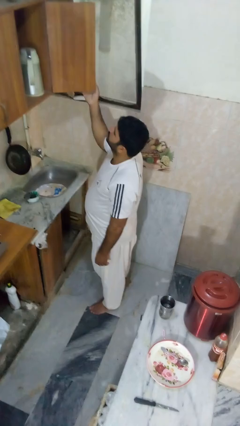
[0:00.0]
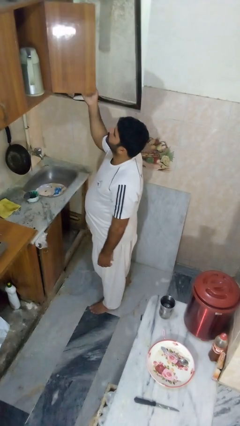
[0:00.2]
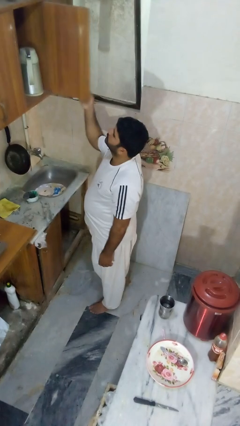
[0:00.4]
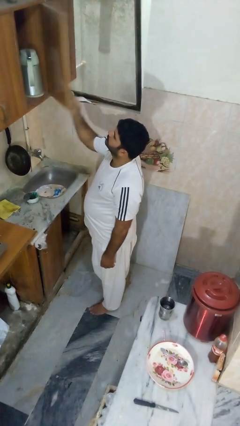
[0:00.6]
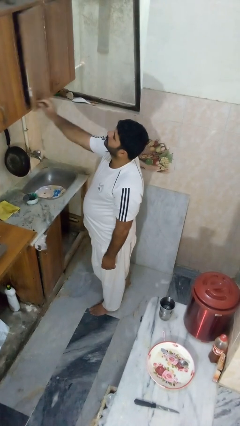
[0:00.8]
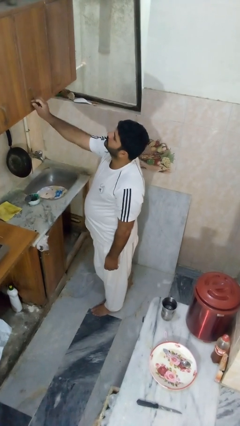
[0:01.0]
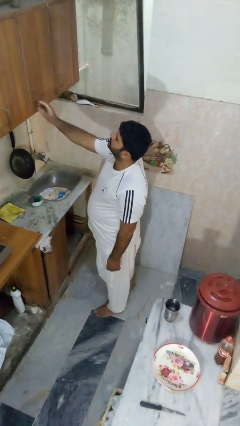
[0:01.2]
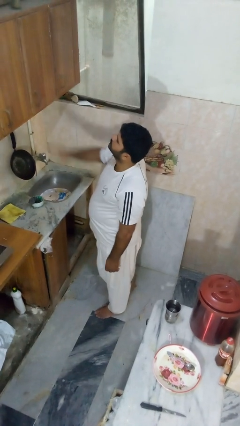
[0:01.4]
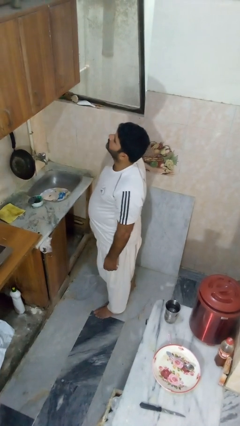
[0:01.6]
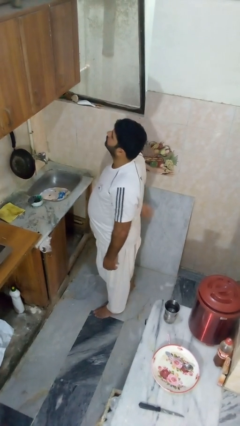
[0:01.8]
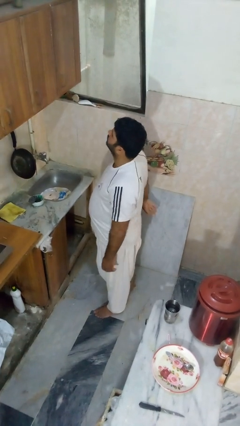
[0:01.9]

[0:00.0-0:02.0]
person closes cabinet

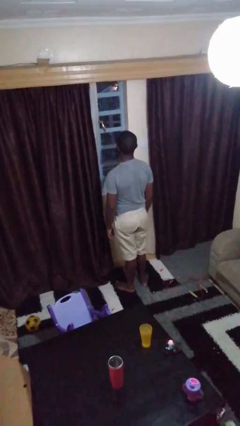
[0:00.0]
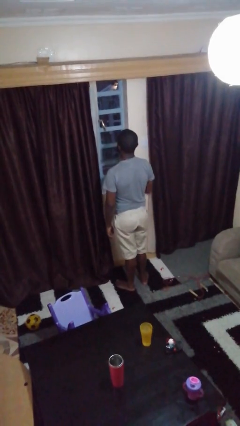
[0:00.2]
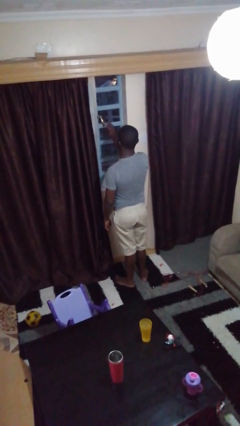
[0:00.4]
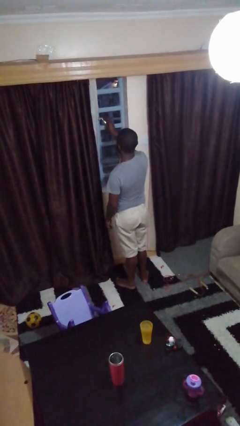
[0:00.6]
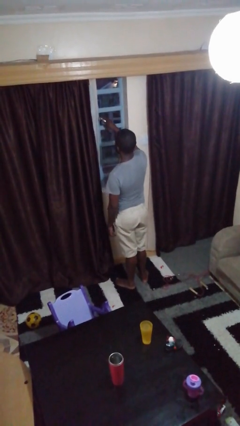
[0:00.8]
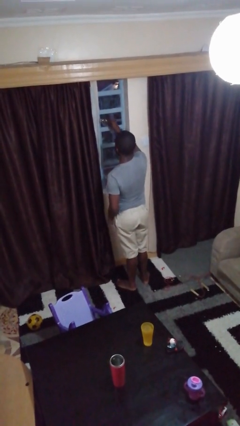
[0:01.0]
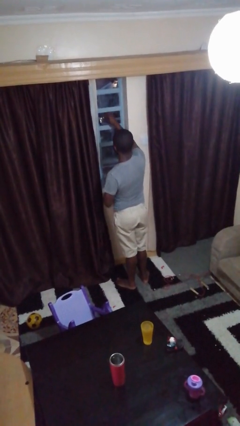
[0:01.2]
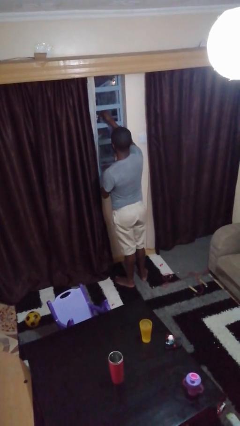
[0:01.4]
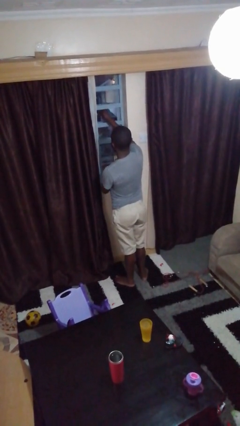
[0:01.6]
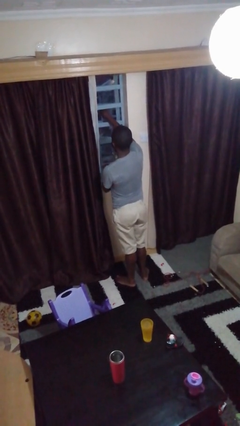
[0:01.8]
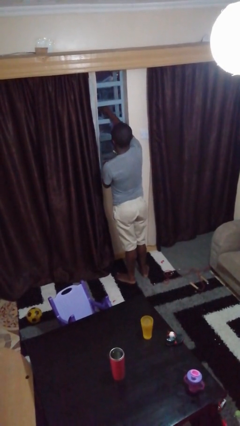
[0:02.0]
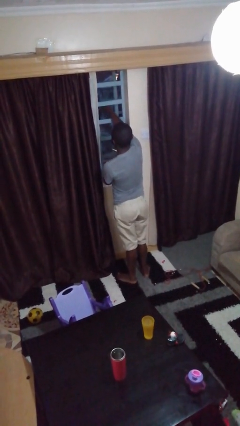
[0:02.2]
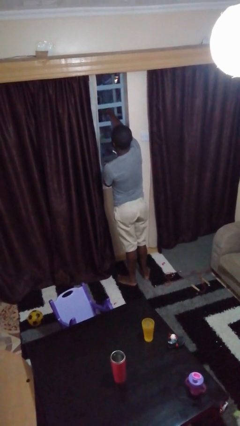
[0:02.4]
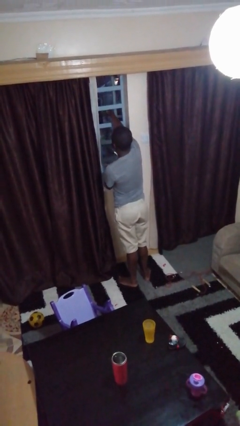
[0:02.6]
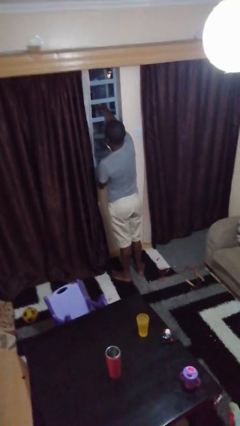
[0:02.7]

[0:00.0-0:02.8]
person opens home window

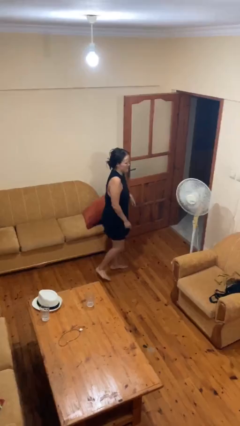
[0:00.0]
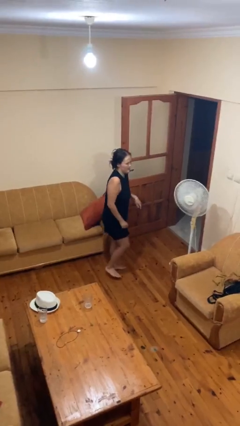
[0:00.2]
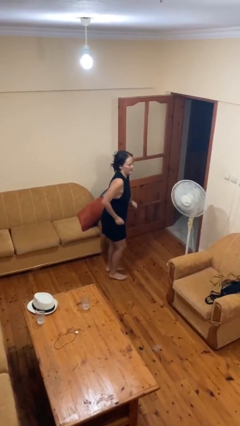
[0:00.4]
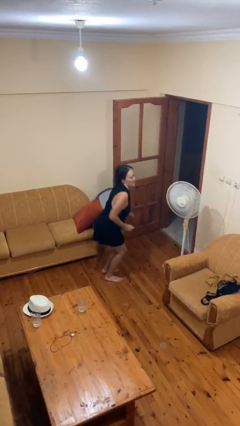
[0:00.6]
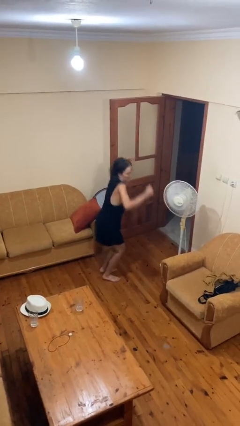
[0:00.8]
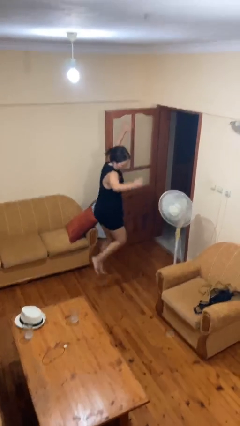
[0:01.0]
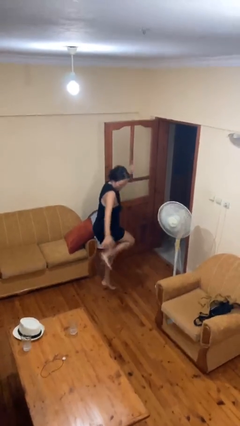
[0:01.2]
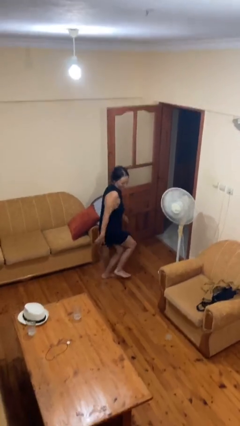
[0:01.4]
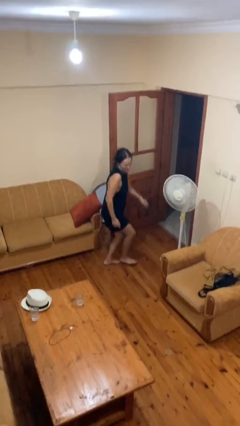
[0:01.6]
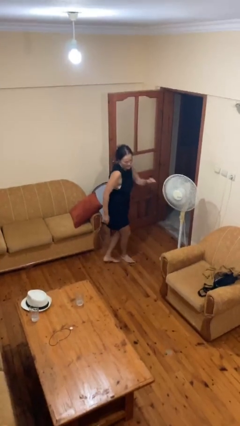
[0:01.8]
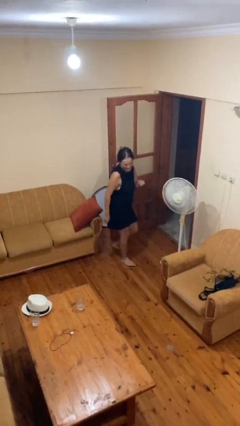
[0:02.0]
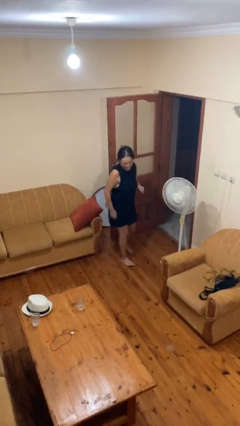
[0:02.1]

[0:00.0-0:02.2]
person jumps

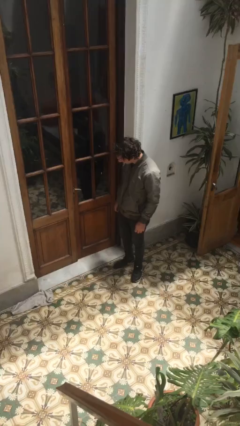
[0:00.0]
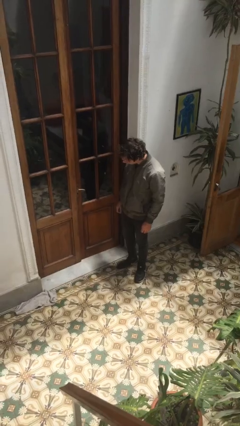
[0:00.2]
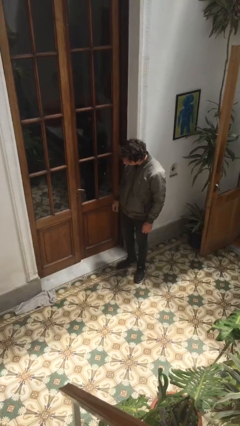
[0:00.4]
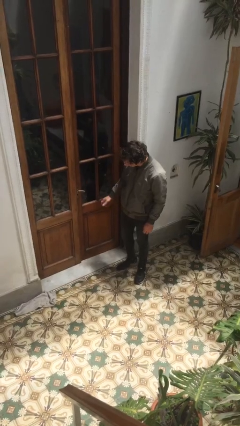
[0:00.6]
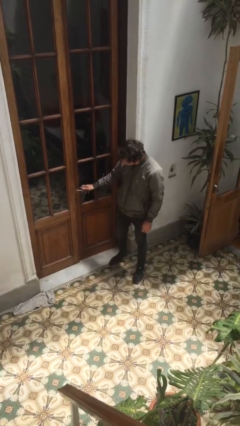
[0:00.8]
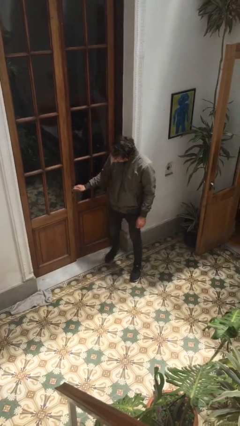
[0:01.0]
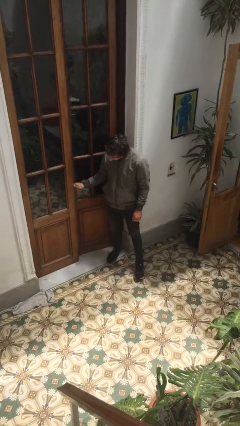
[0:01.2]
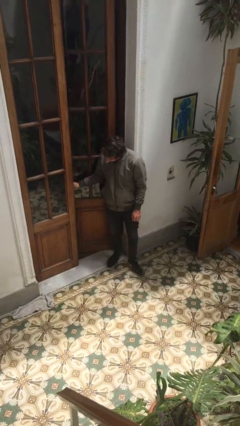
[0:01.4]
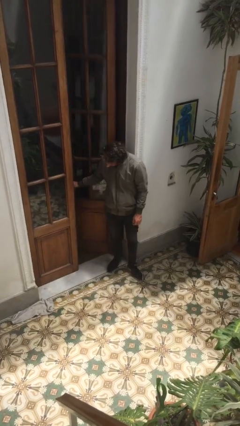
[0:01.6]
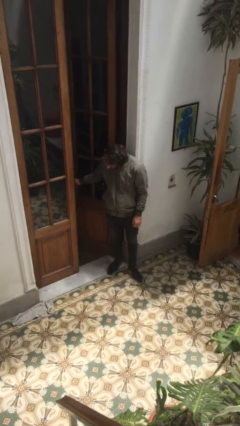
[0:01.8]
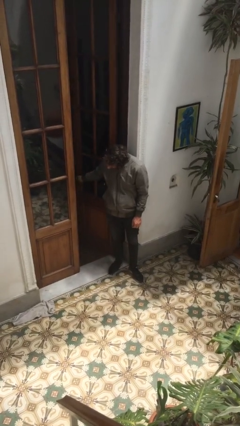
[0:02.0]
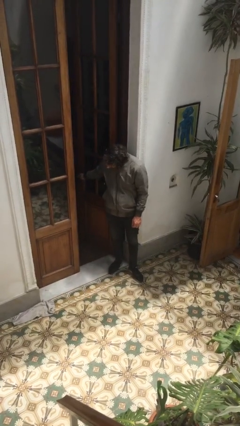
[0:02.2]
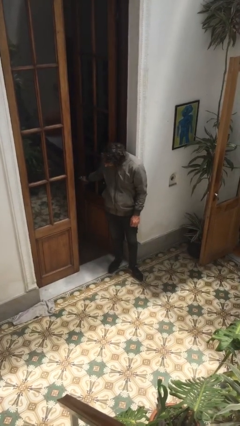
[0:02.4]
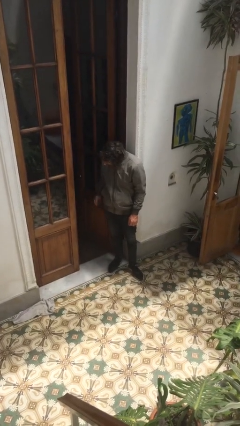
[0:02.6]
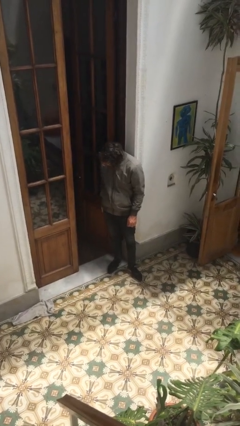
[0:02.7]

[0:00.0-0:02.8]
person opens facility door

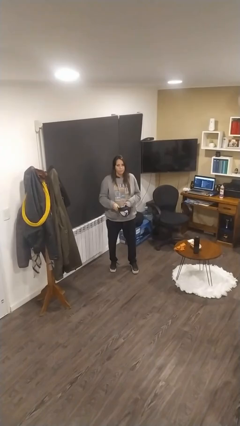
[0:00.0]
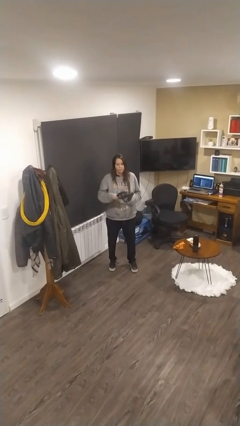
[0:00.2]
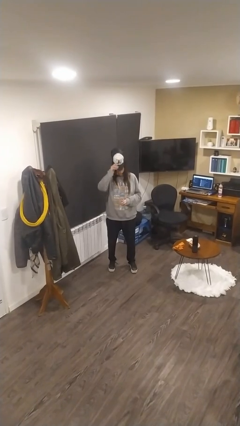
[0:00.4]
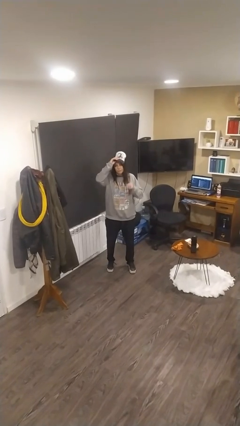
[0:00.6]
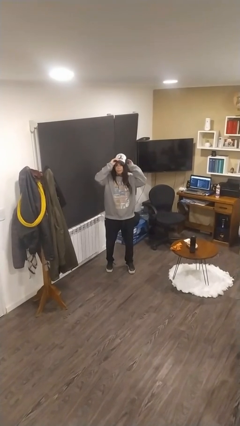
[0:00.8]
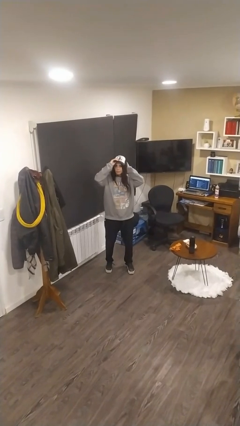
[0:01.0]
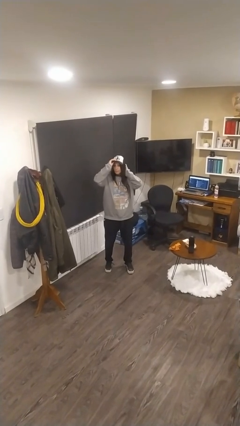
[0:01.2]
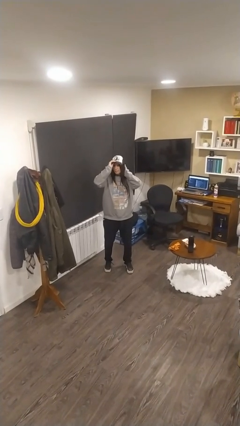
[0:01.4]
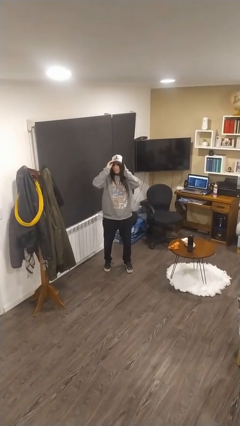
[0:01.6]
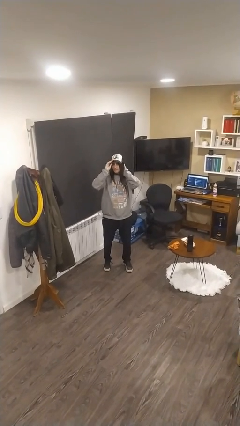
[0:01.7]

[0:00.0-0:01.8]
person puts on hat

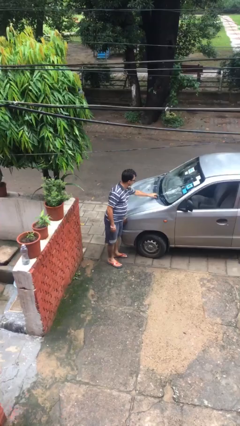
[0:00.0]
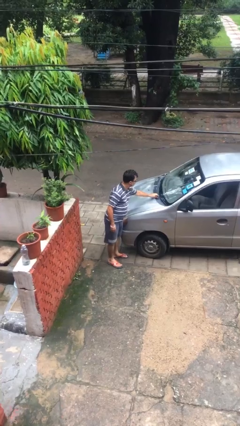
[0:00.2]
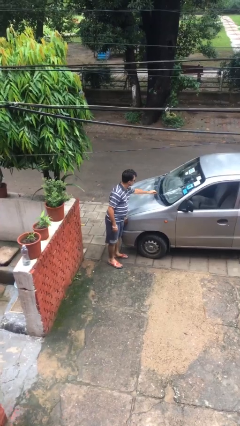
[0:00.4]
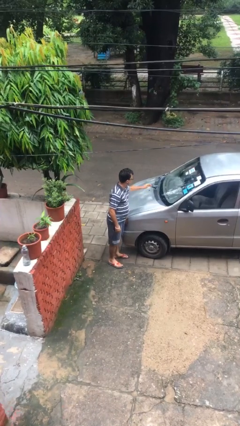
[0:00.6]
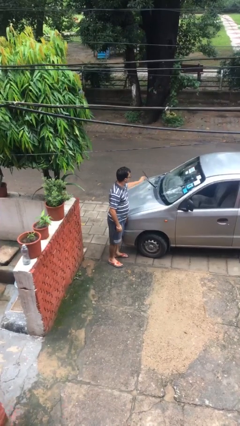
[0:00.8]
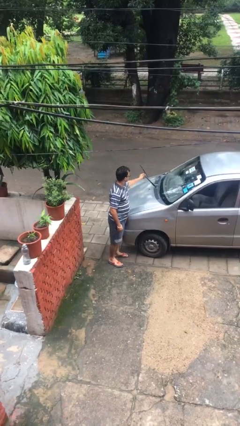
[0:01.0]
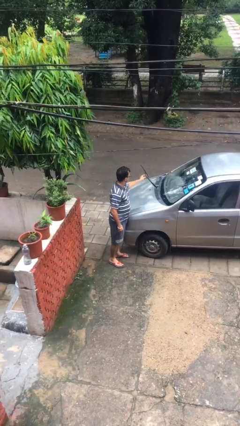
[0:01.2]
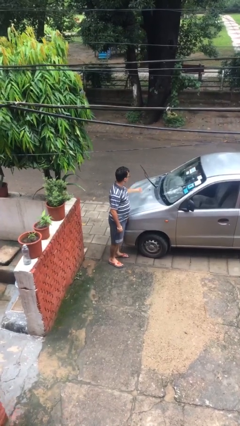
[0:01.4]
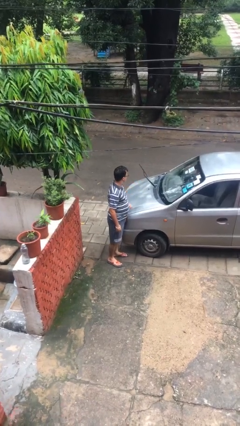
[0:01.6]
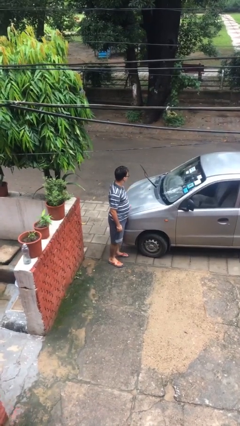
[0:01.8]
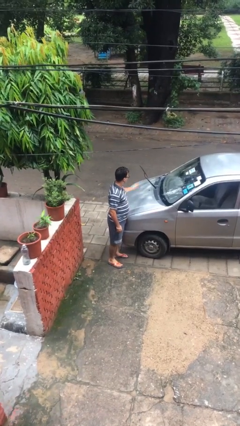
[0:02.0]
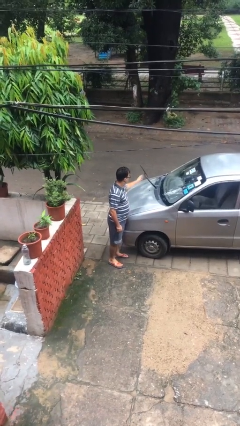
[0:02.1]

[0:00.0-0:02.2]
person flips up car wipers

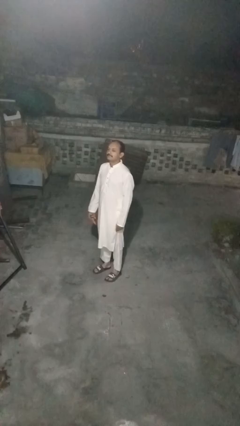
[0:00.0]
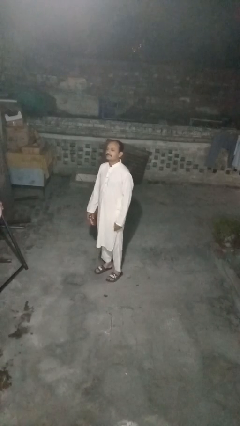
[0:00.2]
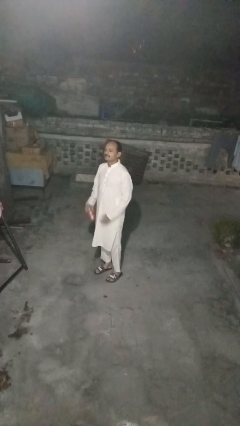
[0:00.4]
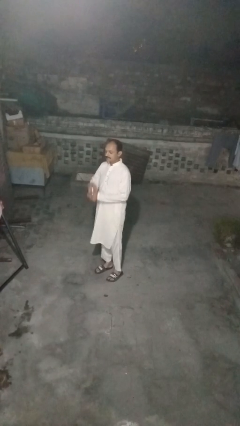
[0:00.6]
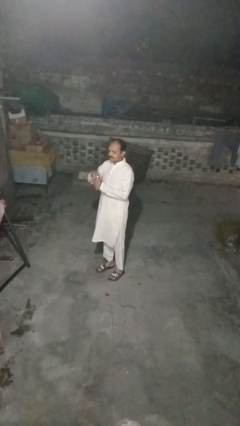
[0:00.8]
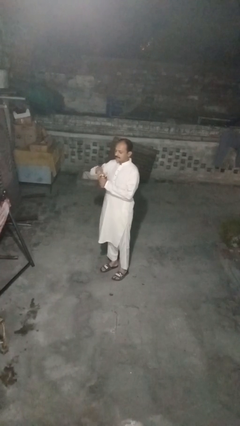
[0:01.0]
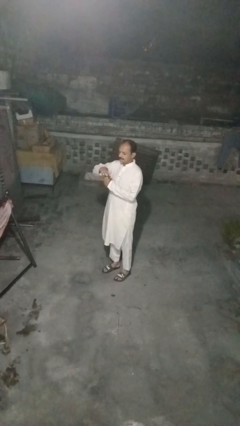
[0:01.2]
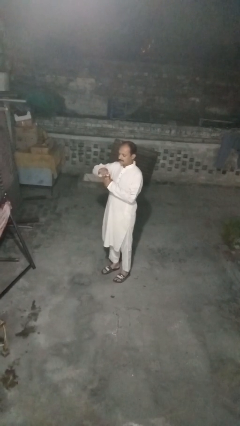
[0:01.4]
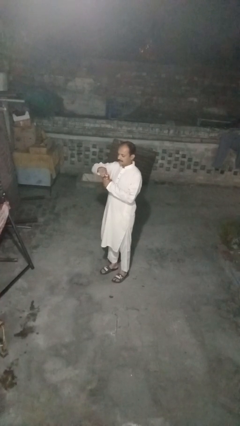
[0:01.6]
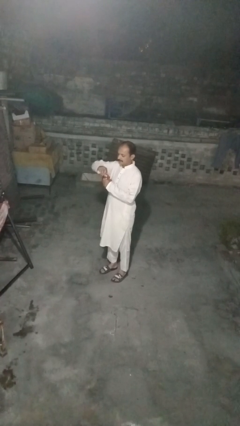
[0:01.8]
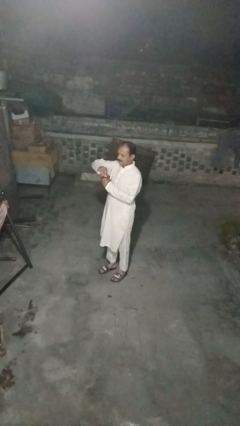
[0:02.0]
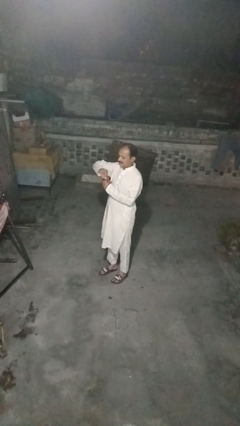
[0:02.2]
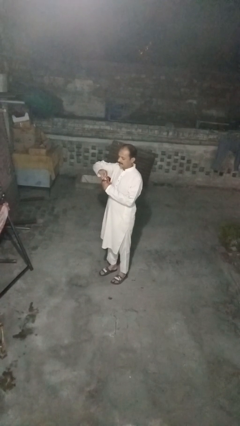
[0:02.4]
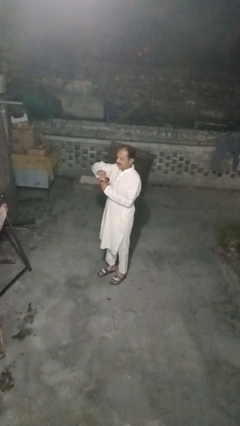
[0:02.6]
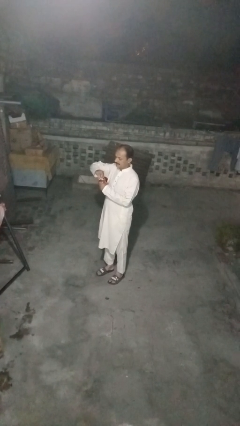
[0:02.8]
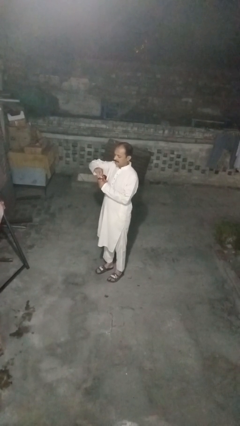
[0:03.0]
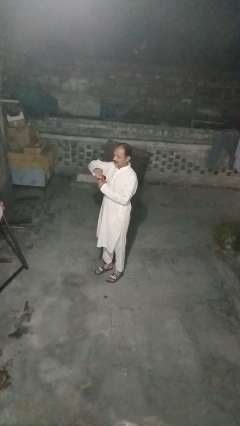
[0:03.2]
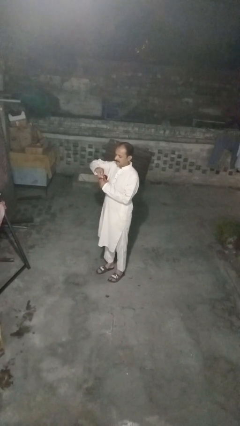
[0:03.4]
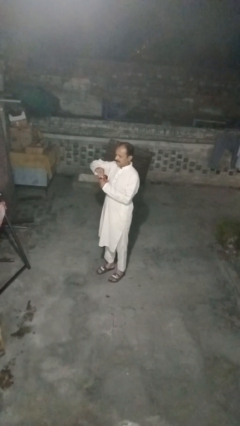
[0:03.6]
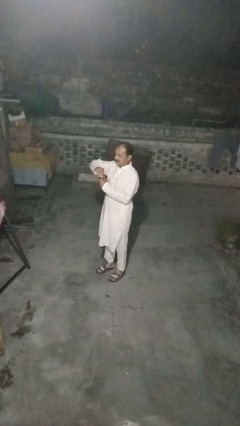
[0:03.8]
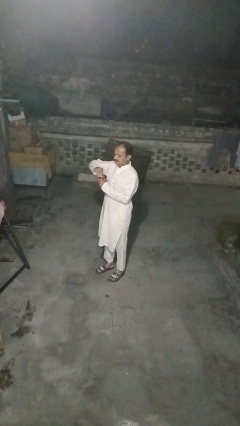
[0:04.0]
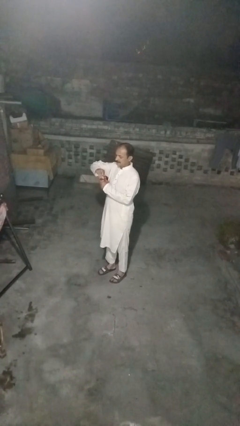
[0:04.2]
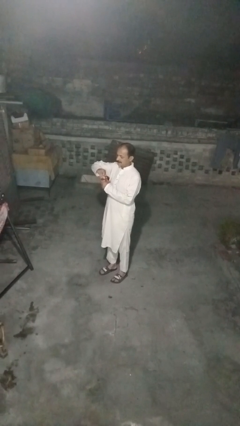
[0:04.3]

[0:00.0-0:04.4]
person opens beverage can
